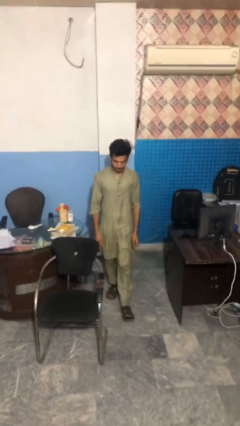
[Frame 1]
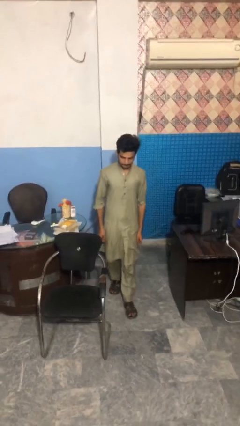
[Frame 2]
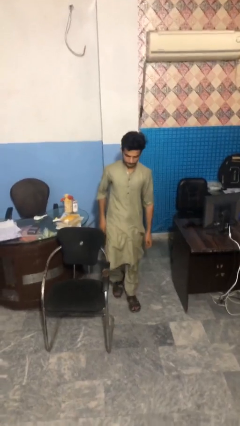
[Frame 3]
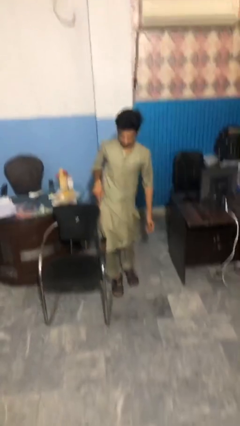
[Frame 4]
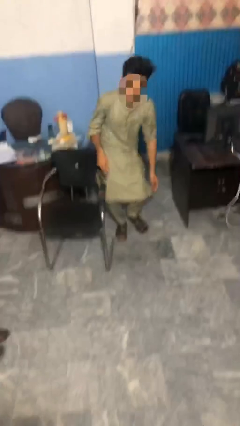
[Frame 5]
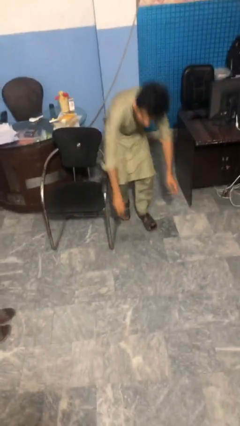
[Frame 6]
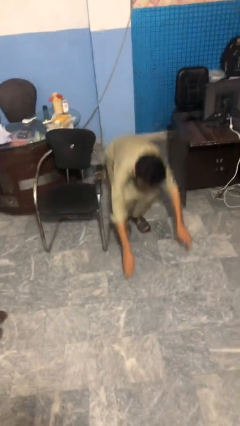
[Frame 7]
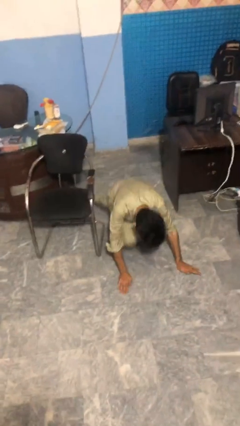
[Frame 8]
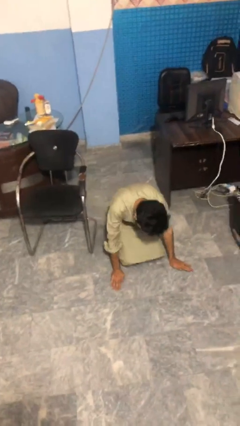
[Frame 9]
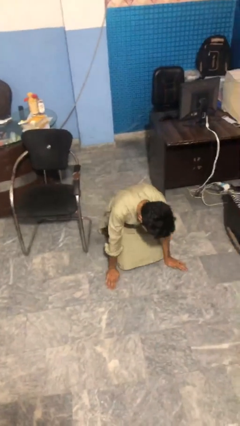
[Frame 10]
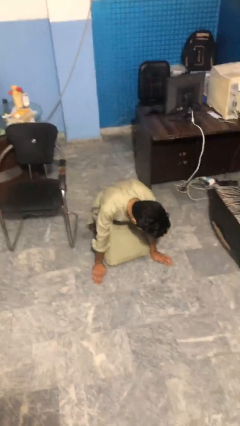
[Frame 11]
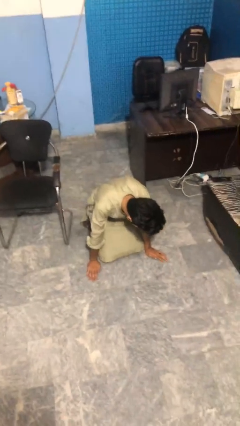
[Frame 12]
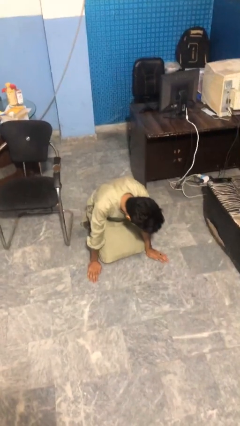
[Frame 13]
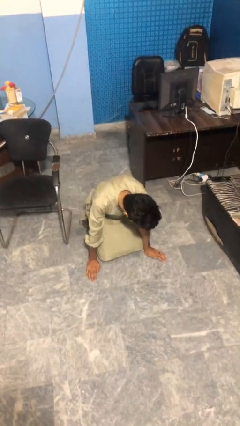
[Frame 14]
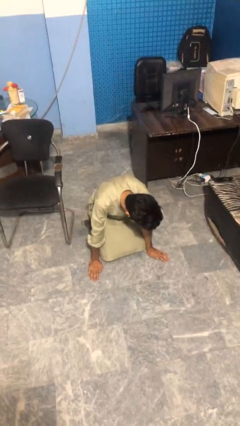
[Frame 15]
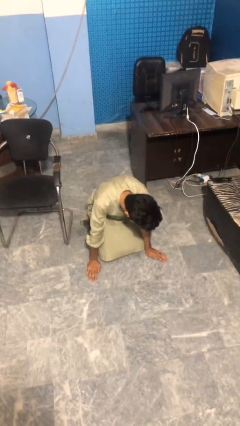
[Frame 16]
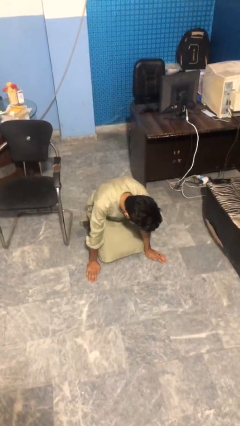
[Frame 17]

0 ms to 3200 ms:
person trips on object on floor

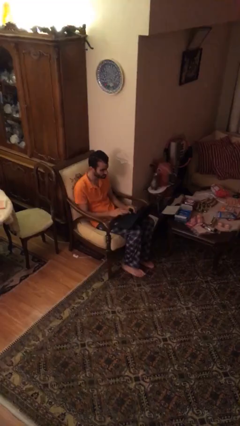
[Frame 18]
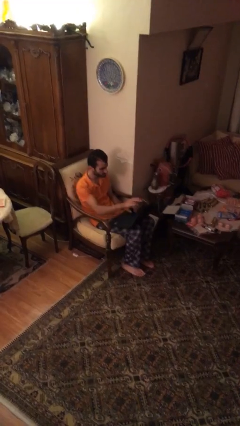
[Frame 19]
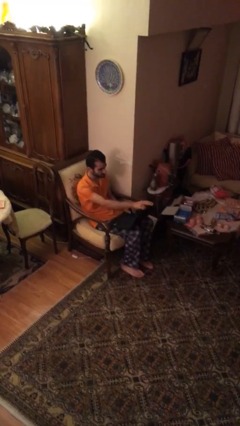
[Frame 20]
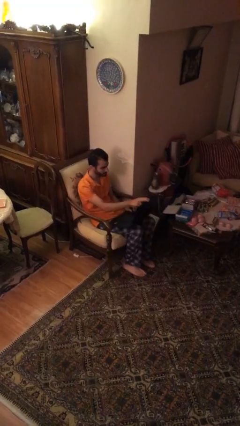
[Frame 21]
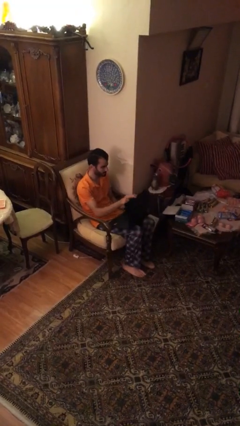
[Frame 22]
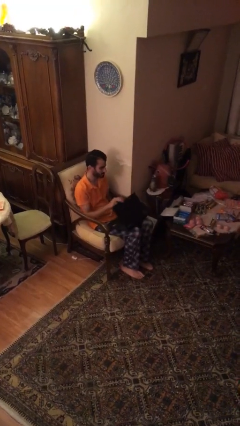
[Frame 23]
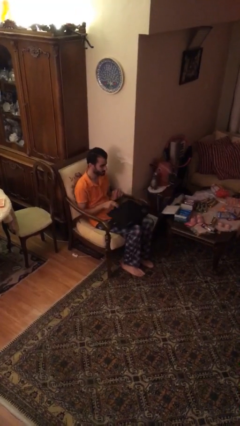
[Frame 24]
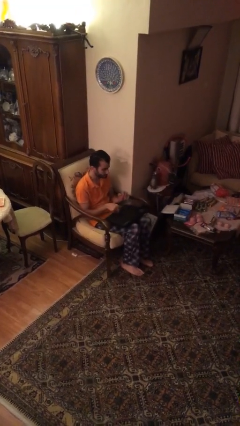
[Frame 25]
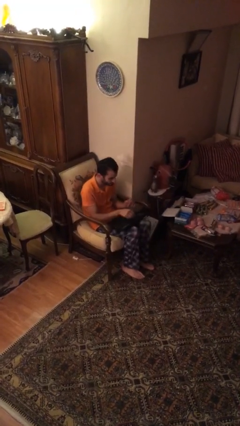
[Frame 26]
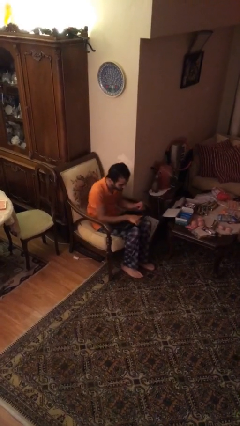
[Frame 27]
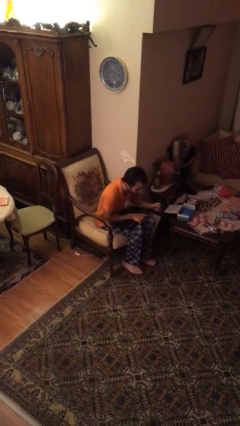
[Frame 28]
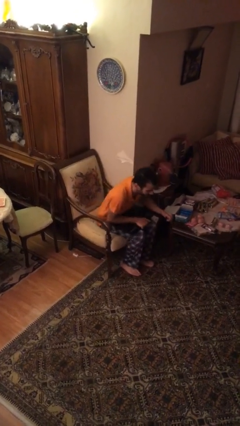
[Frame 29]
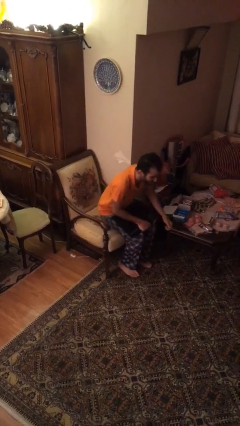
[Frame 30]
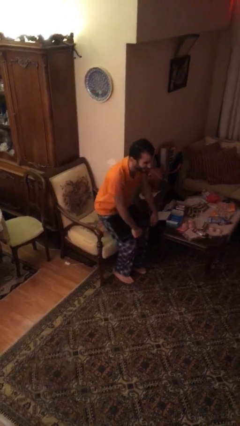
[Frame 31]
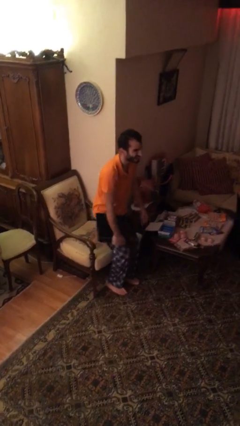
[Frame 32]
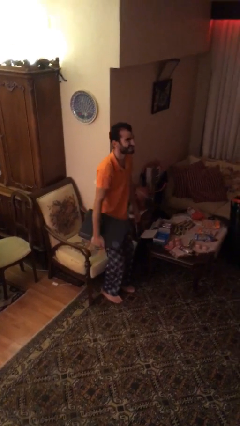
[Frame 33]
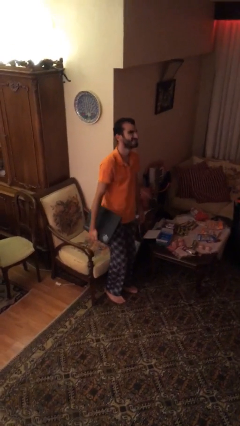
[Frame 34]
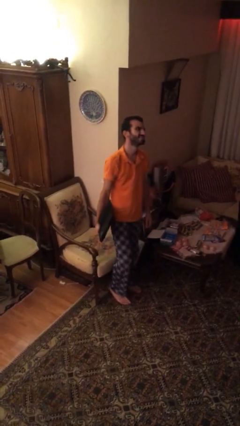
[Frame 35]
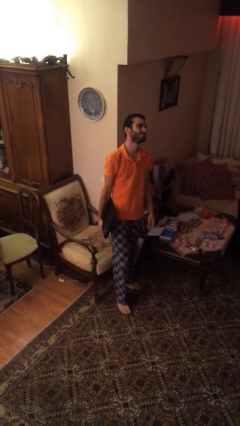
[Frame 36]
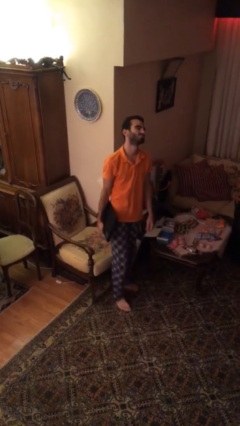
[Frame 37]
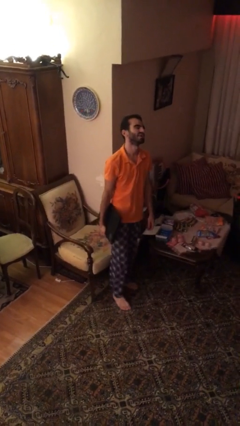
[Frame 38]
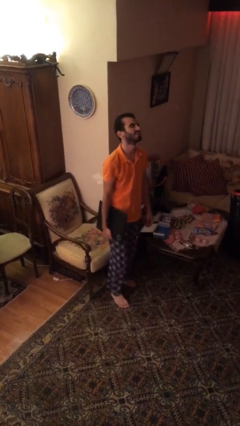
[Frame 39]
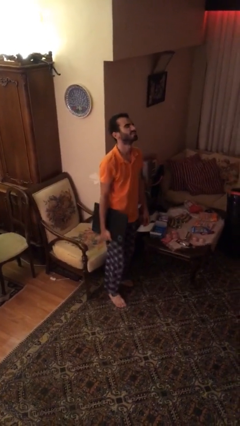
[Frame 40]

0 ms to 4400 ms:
person stands up

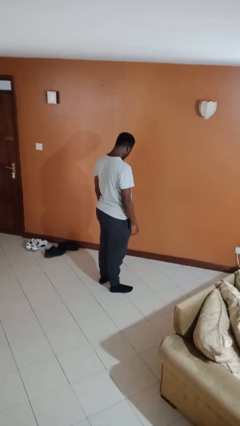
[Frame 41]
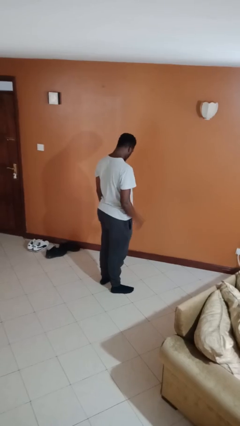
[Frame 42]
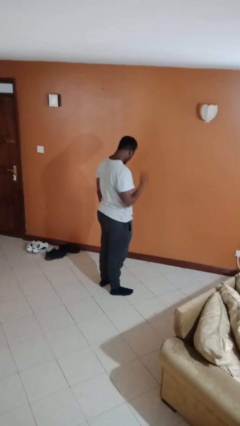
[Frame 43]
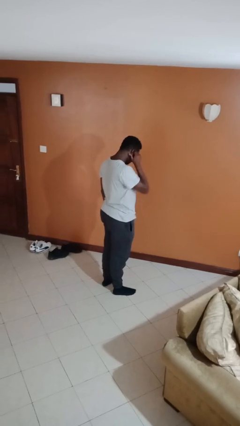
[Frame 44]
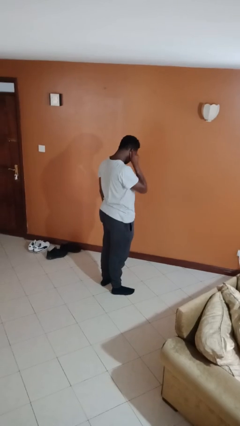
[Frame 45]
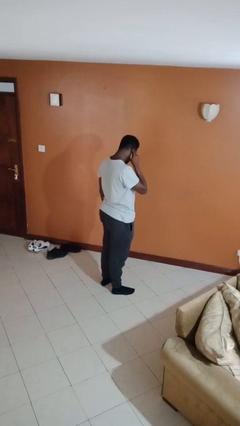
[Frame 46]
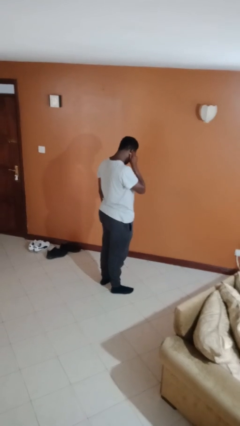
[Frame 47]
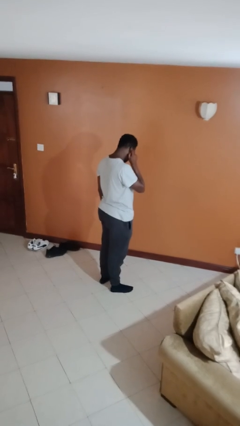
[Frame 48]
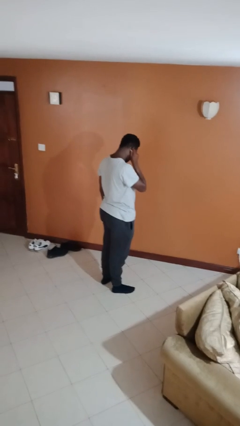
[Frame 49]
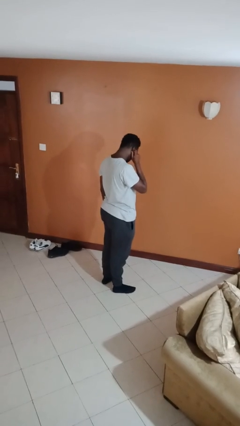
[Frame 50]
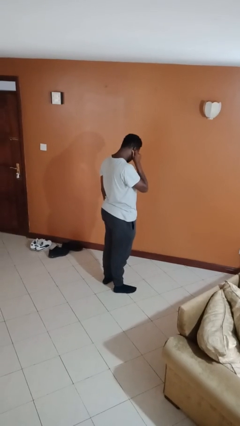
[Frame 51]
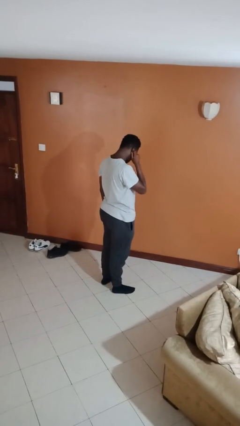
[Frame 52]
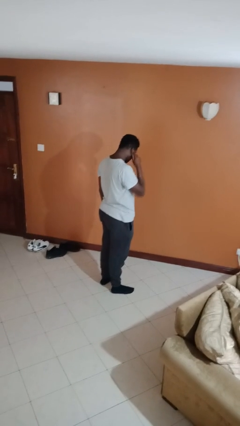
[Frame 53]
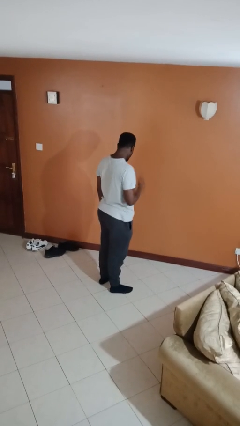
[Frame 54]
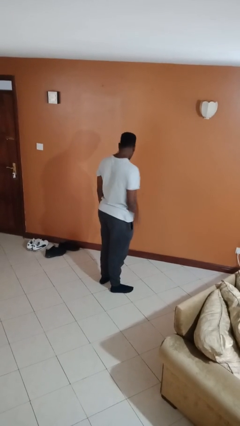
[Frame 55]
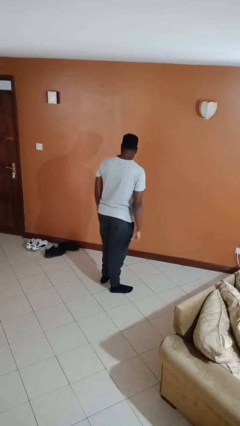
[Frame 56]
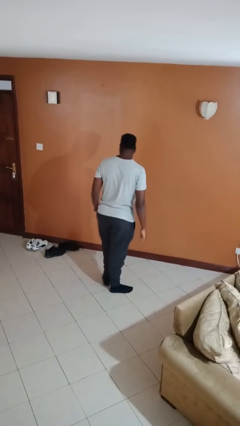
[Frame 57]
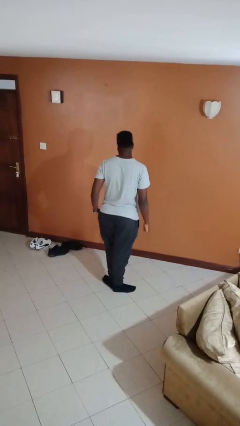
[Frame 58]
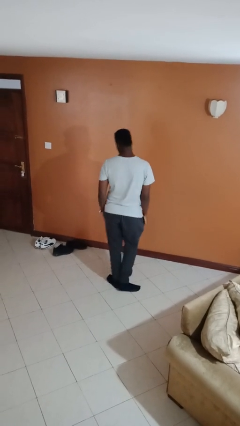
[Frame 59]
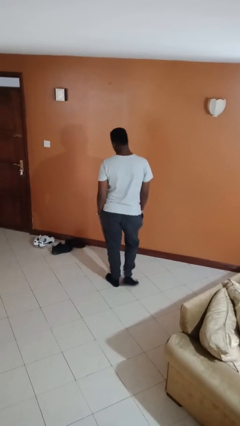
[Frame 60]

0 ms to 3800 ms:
person touches earlobe

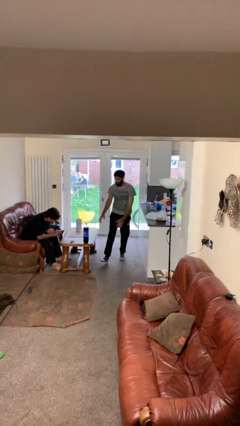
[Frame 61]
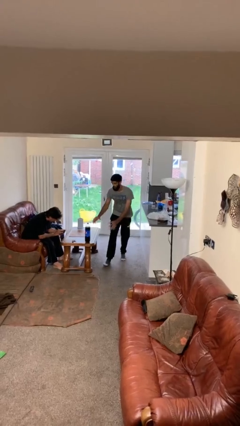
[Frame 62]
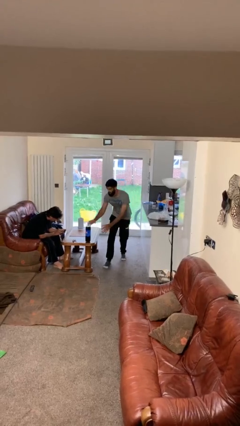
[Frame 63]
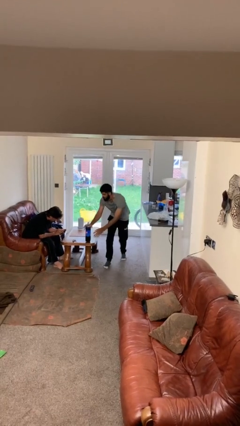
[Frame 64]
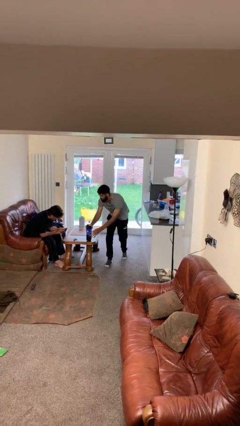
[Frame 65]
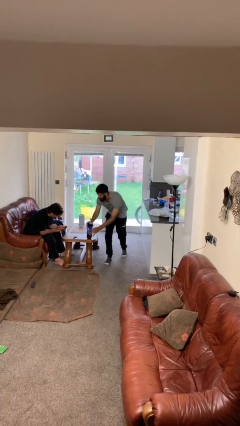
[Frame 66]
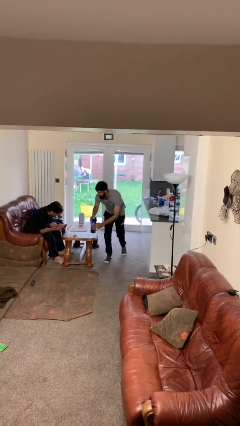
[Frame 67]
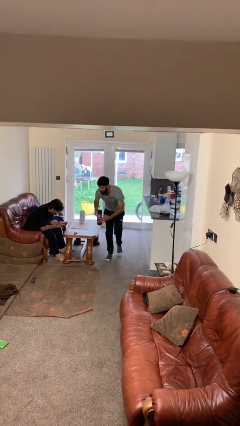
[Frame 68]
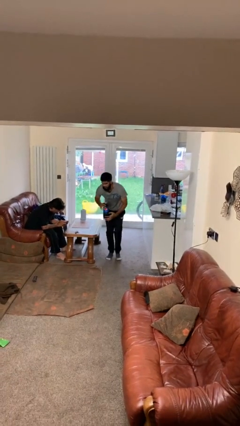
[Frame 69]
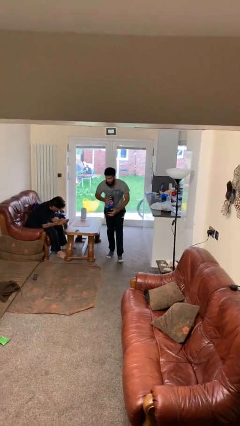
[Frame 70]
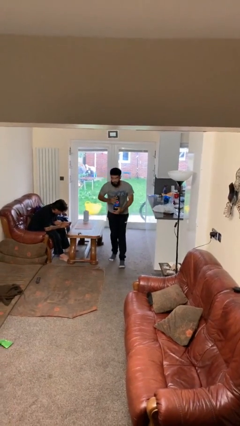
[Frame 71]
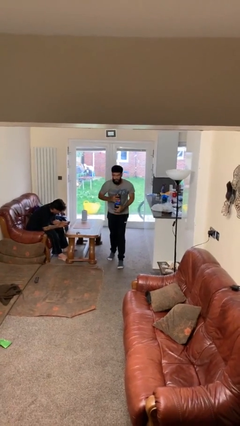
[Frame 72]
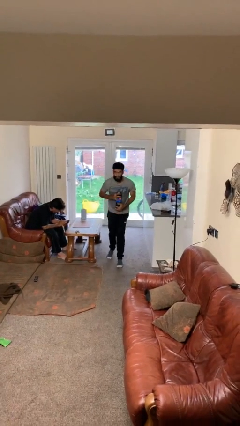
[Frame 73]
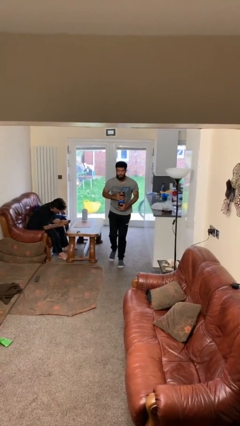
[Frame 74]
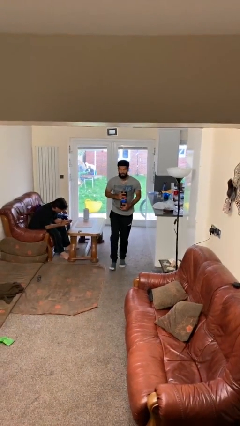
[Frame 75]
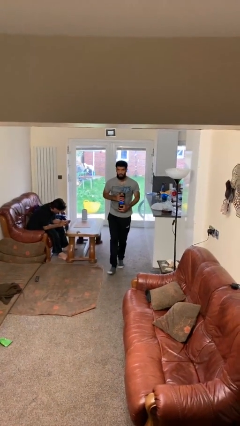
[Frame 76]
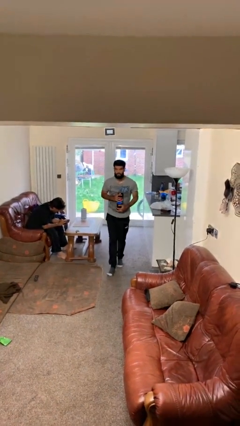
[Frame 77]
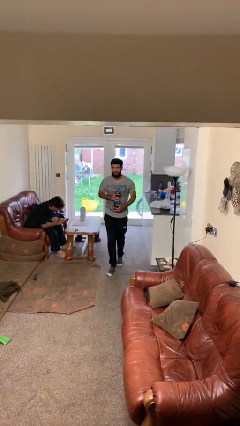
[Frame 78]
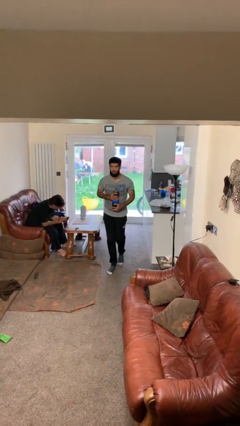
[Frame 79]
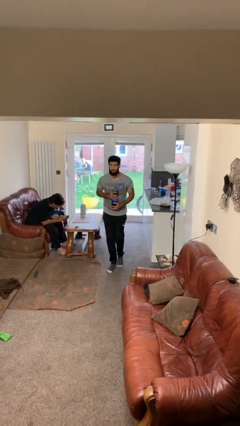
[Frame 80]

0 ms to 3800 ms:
person steals object from person

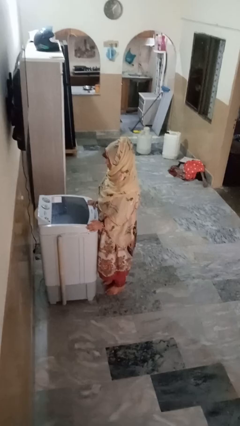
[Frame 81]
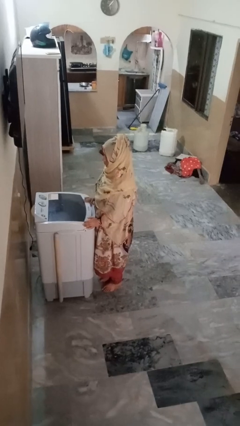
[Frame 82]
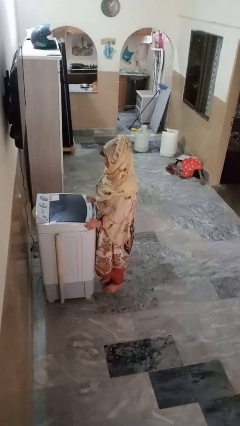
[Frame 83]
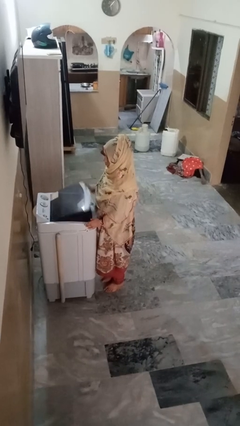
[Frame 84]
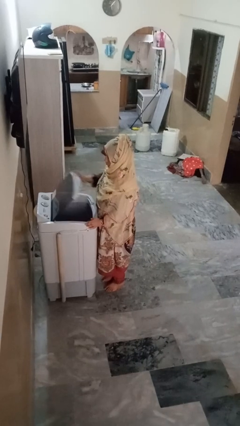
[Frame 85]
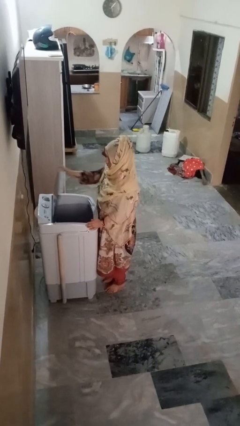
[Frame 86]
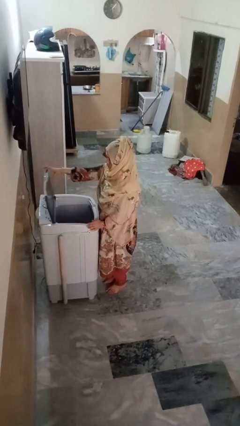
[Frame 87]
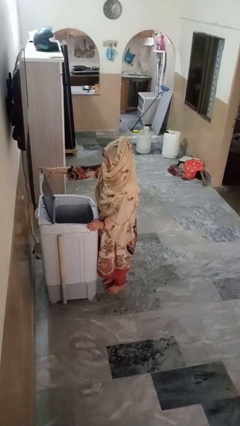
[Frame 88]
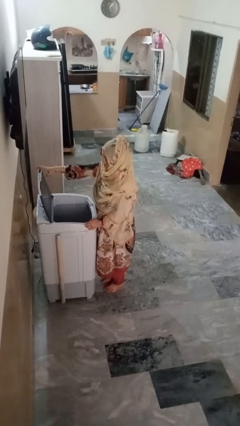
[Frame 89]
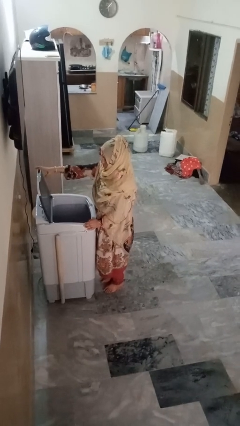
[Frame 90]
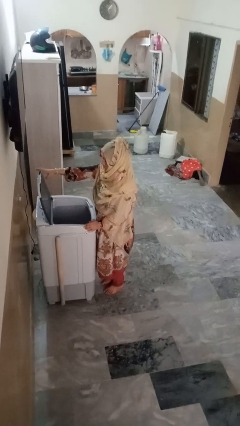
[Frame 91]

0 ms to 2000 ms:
person opens clothes washer

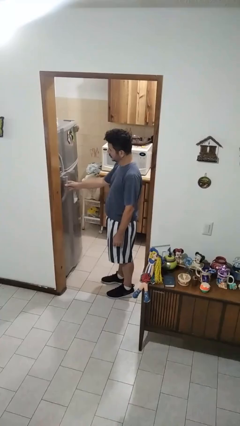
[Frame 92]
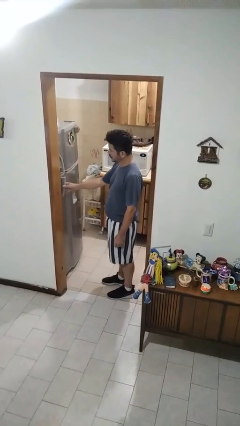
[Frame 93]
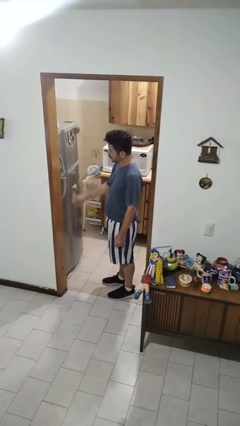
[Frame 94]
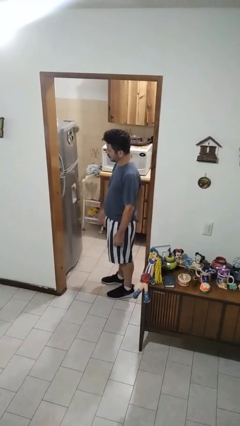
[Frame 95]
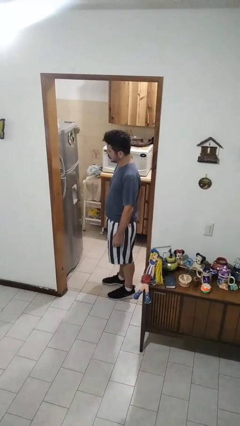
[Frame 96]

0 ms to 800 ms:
person closes refrigerator
